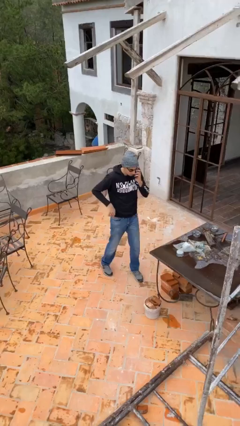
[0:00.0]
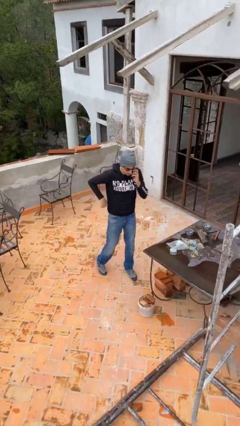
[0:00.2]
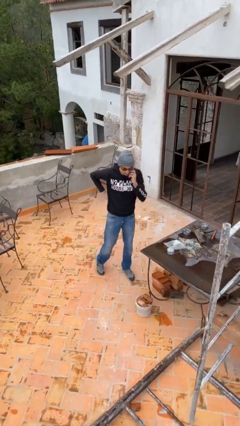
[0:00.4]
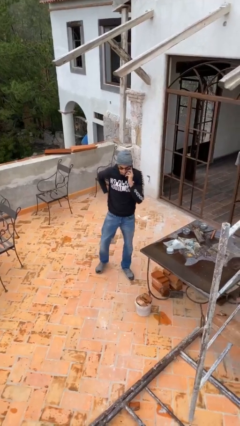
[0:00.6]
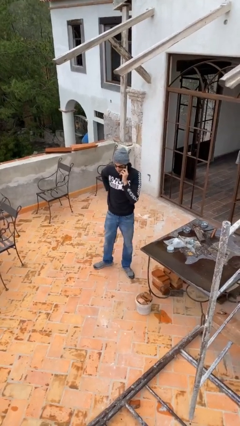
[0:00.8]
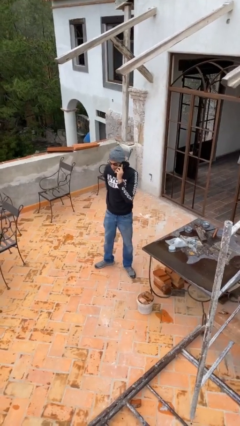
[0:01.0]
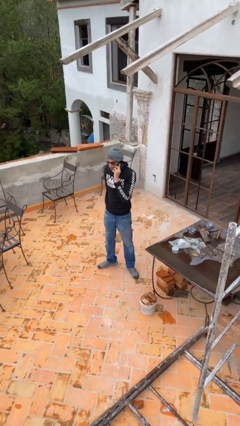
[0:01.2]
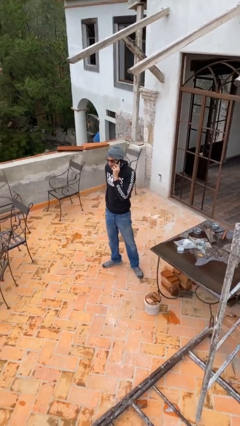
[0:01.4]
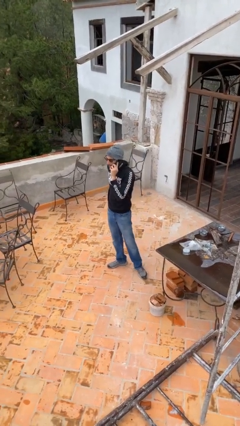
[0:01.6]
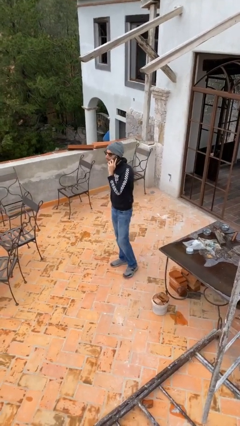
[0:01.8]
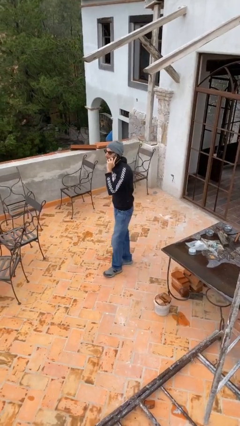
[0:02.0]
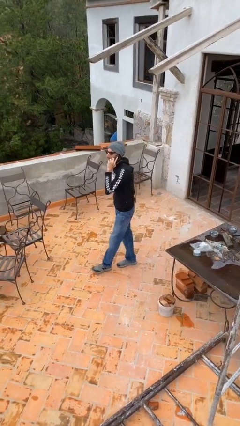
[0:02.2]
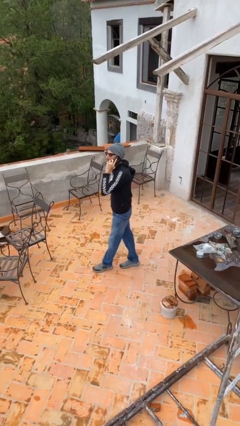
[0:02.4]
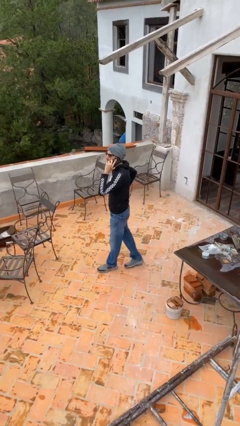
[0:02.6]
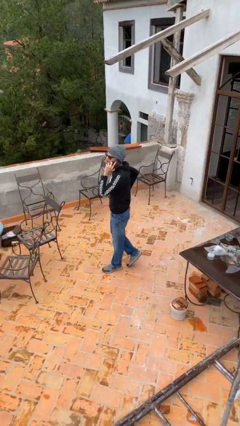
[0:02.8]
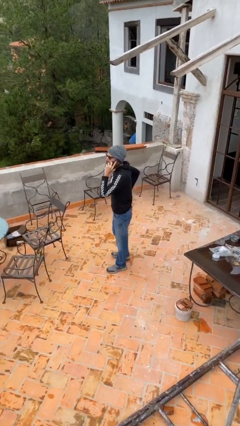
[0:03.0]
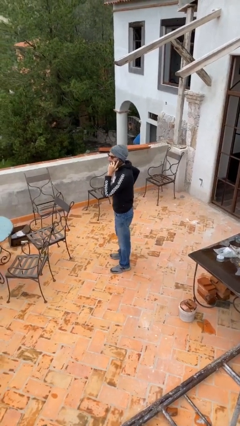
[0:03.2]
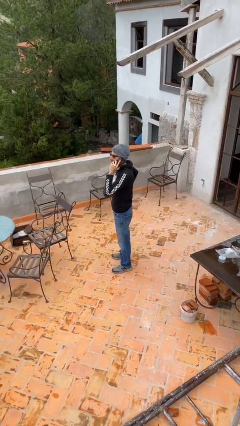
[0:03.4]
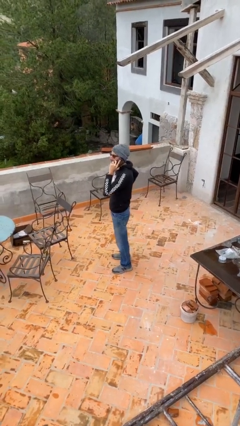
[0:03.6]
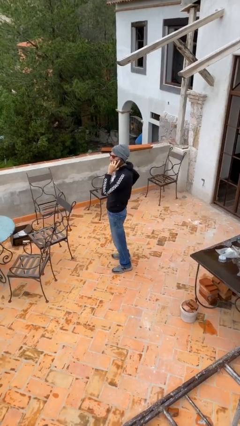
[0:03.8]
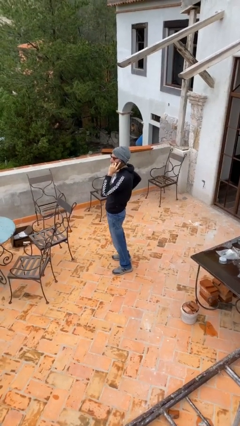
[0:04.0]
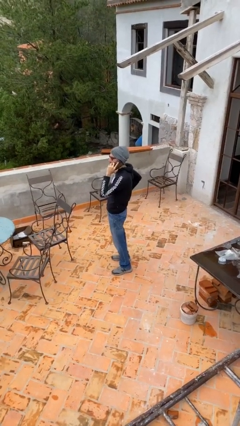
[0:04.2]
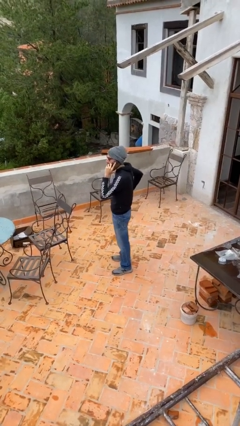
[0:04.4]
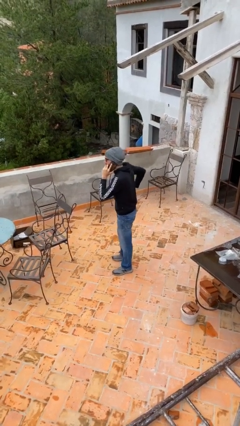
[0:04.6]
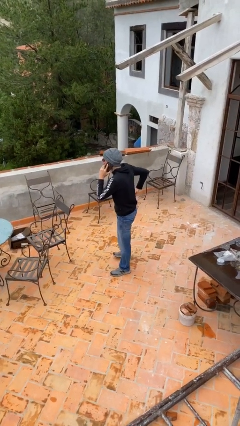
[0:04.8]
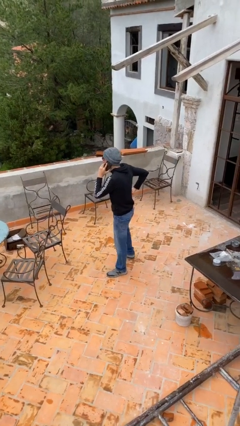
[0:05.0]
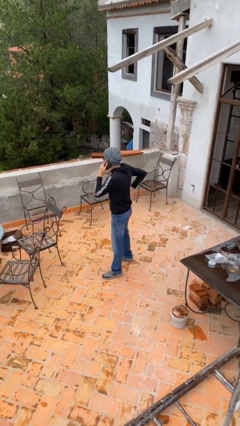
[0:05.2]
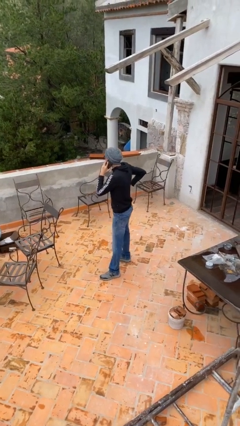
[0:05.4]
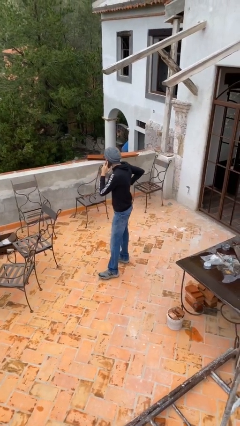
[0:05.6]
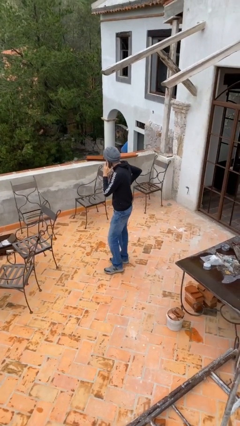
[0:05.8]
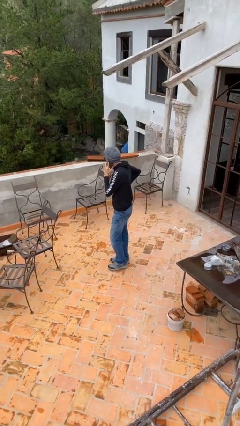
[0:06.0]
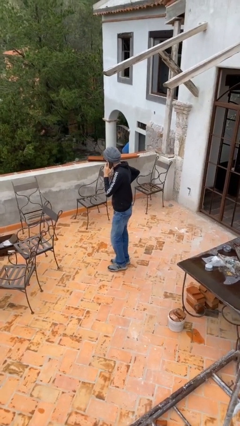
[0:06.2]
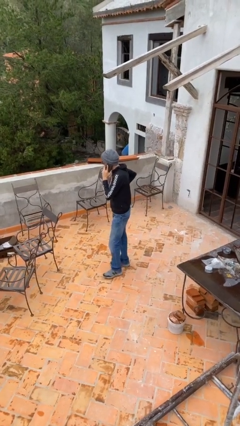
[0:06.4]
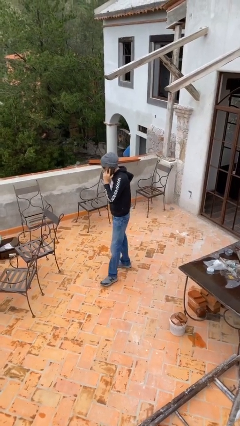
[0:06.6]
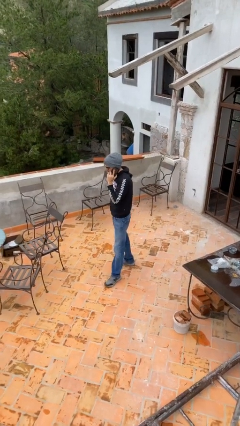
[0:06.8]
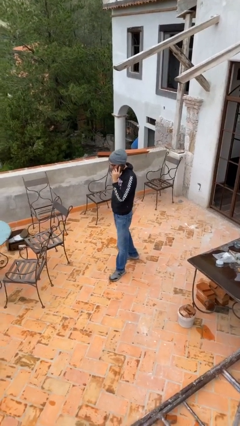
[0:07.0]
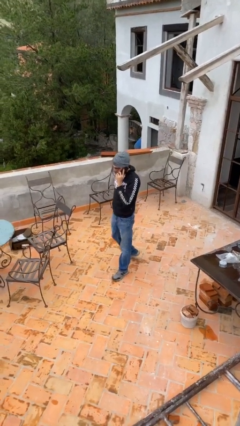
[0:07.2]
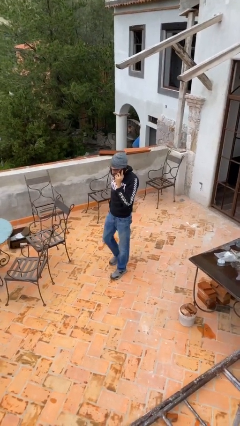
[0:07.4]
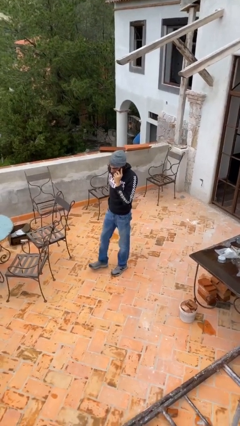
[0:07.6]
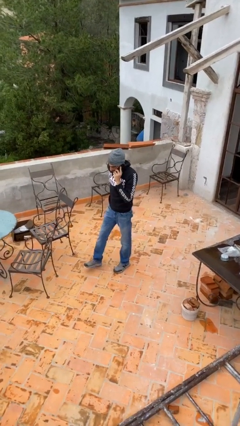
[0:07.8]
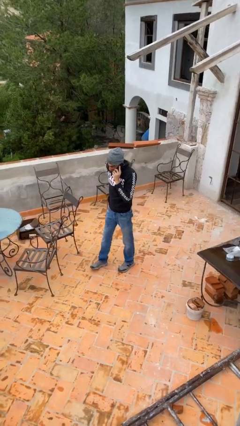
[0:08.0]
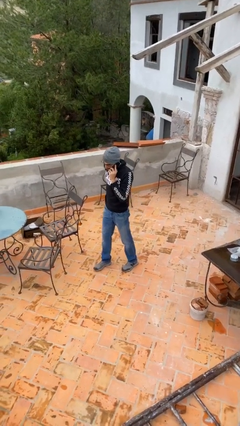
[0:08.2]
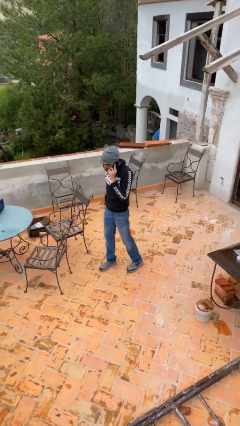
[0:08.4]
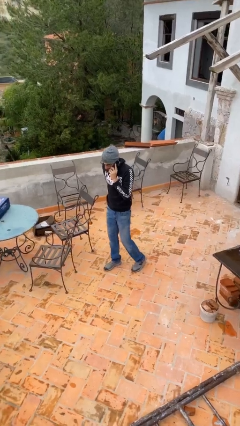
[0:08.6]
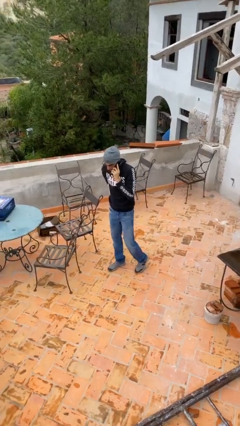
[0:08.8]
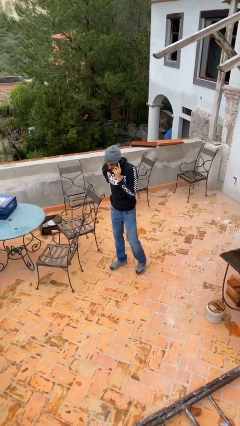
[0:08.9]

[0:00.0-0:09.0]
person talks on phone

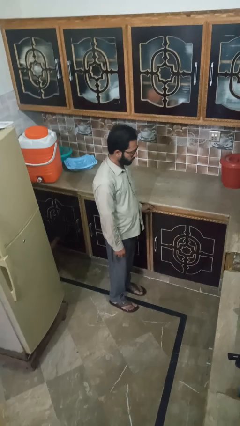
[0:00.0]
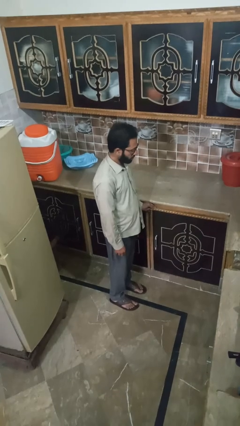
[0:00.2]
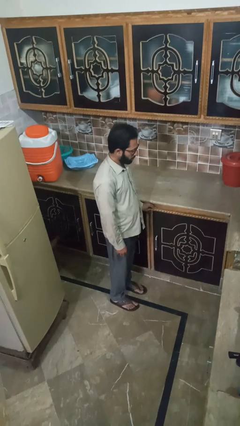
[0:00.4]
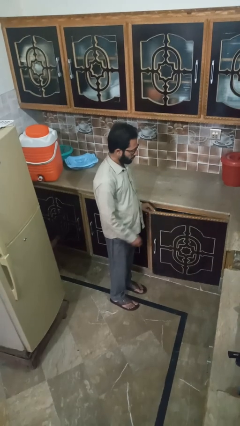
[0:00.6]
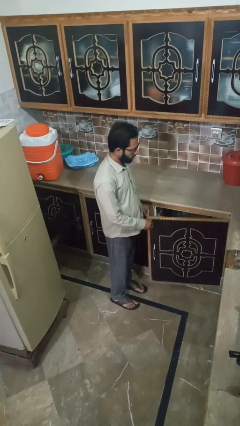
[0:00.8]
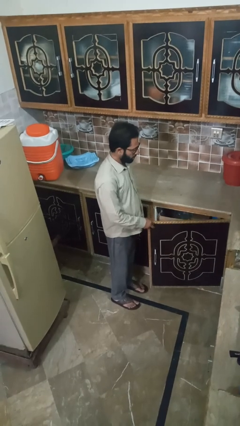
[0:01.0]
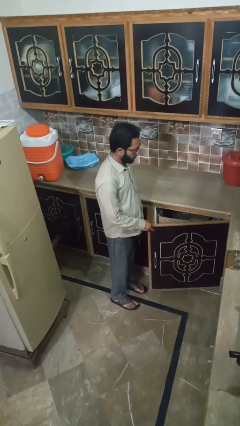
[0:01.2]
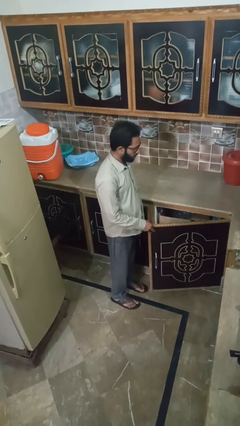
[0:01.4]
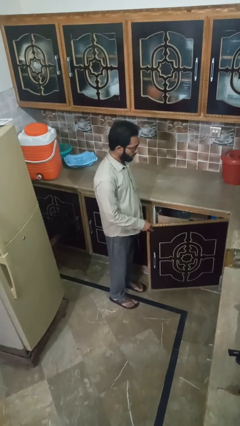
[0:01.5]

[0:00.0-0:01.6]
person opens cabinet

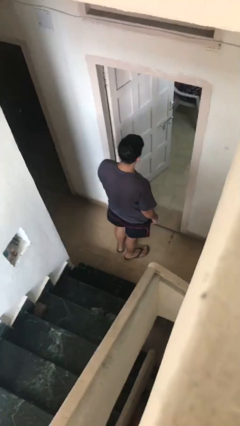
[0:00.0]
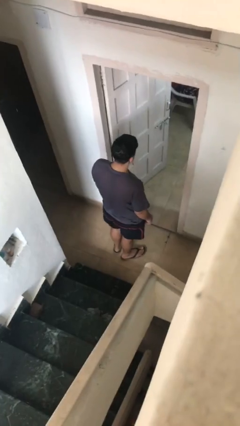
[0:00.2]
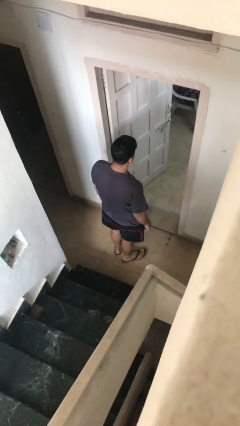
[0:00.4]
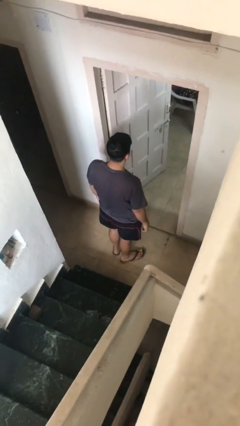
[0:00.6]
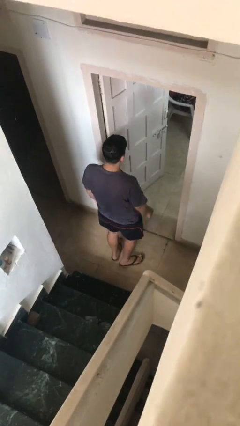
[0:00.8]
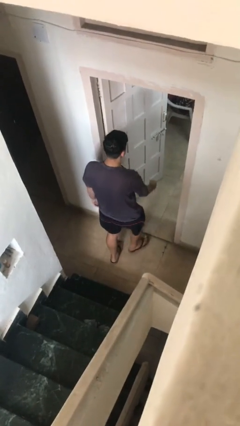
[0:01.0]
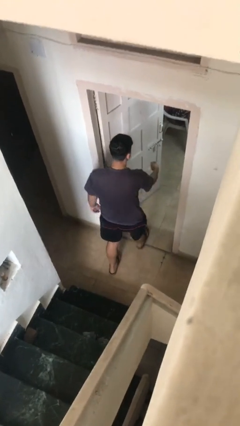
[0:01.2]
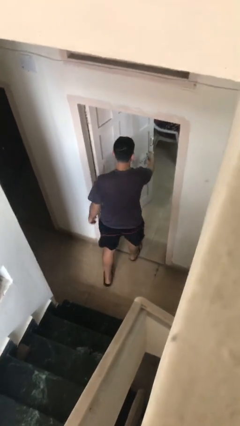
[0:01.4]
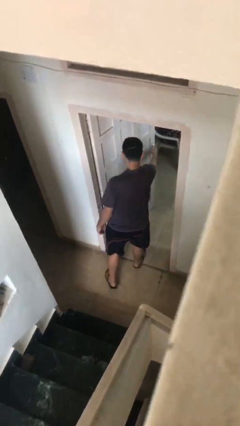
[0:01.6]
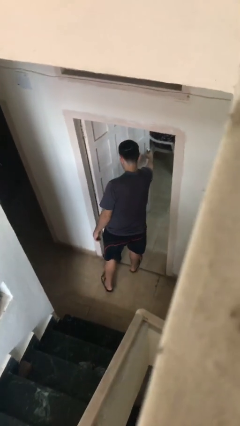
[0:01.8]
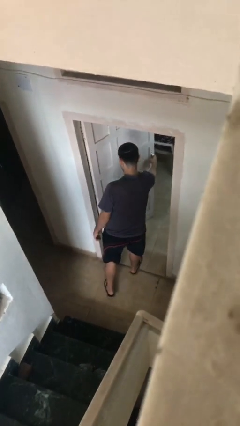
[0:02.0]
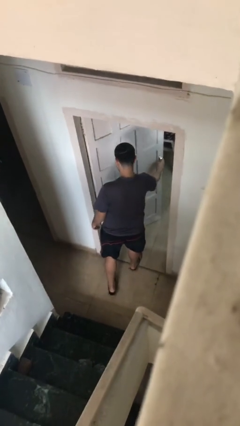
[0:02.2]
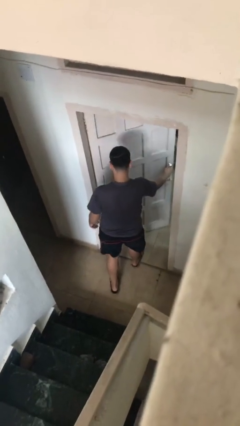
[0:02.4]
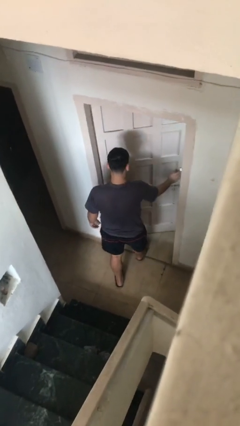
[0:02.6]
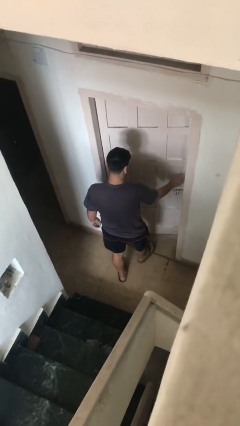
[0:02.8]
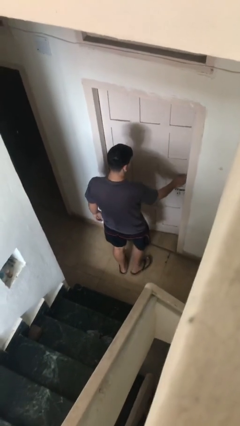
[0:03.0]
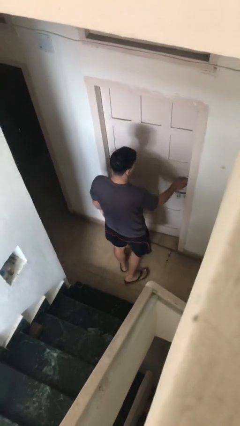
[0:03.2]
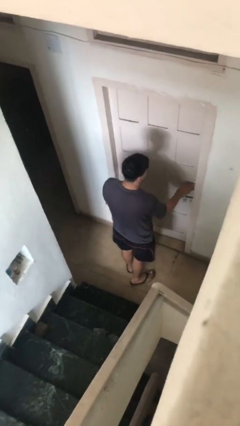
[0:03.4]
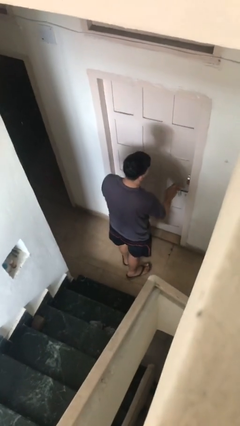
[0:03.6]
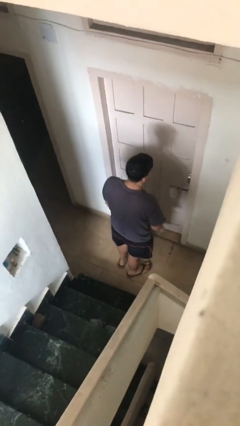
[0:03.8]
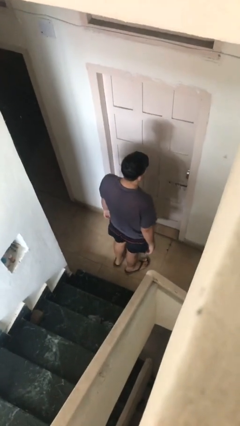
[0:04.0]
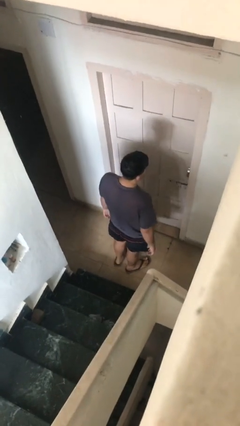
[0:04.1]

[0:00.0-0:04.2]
person closes facility door

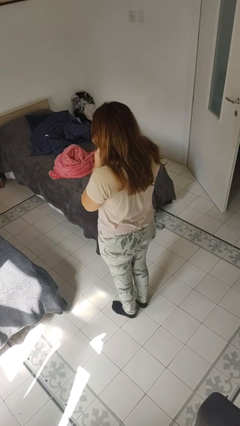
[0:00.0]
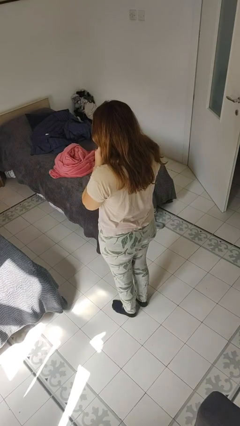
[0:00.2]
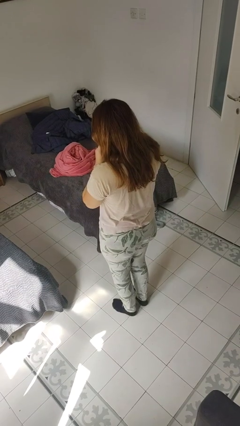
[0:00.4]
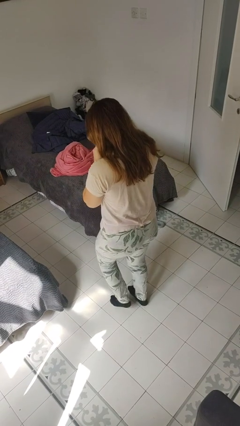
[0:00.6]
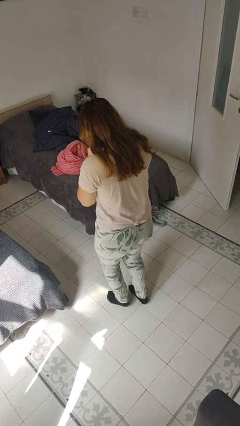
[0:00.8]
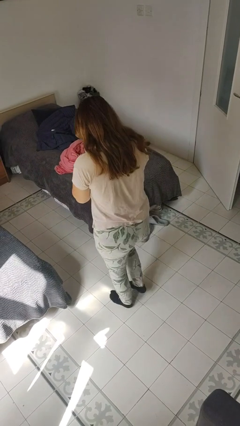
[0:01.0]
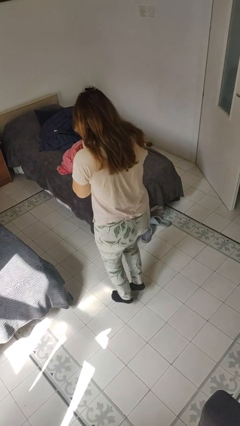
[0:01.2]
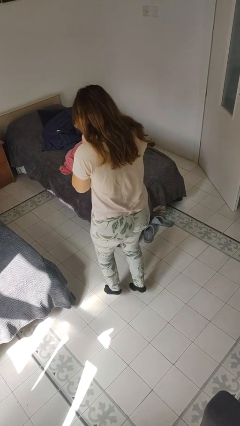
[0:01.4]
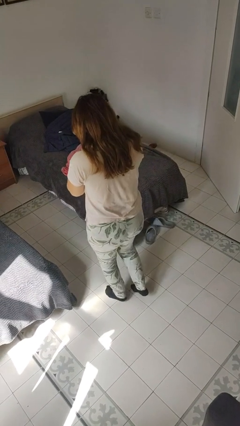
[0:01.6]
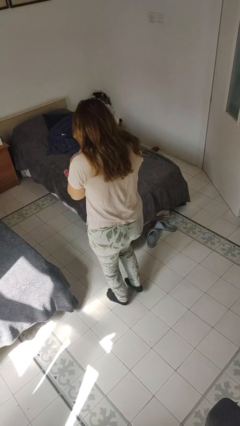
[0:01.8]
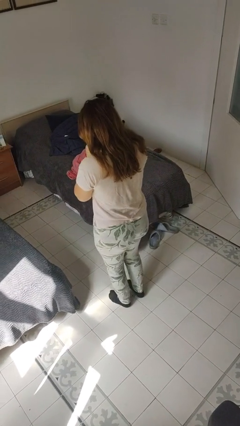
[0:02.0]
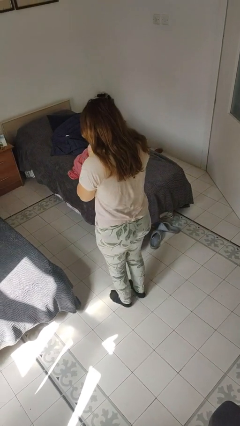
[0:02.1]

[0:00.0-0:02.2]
person walks tiptoe

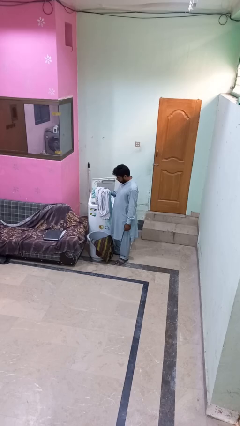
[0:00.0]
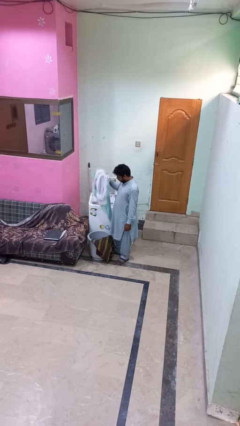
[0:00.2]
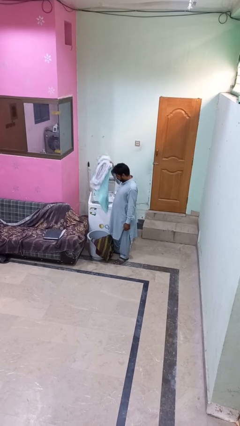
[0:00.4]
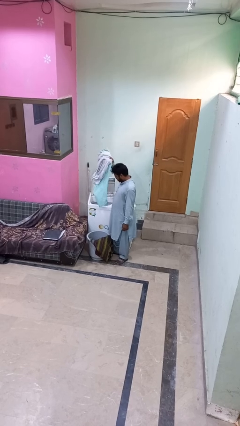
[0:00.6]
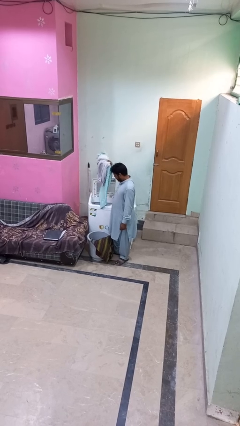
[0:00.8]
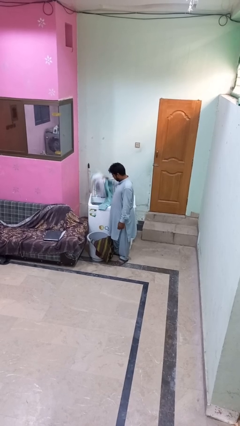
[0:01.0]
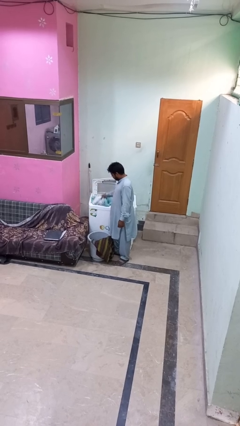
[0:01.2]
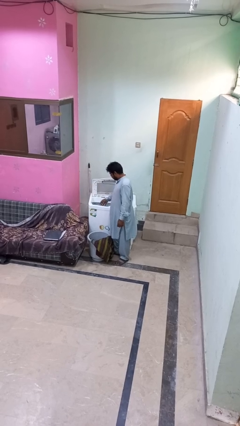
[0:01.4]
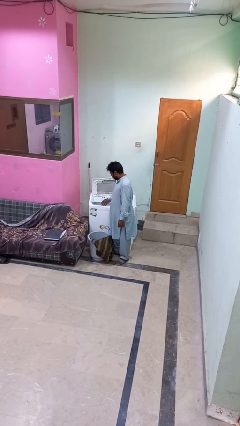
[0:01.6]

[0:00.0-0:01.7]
person loads clotheswasher
